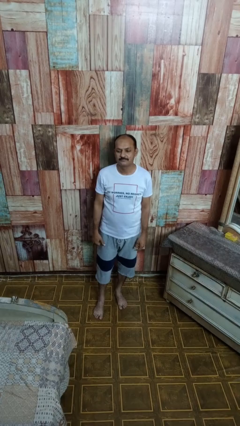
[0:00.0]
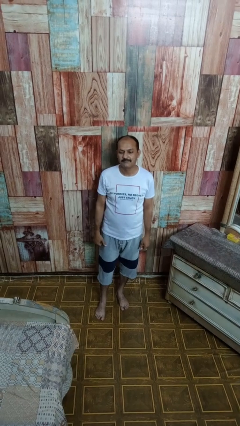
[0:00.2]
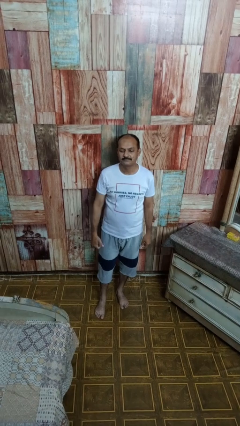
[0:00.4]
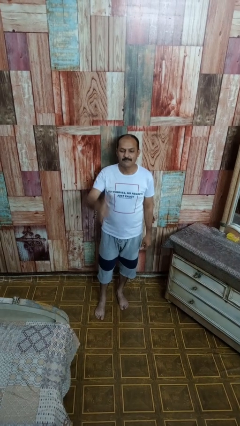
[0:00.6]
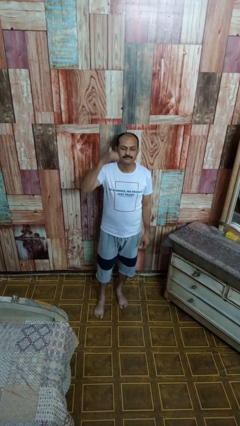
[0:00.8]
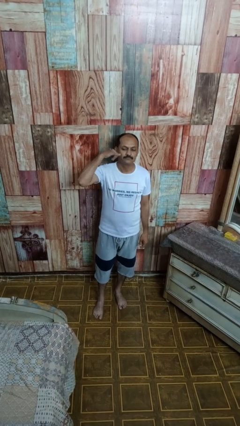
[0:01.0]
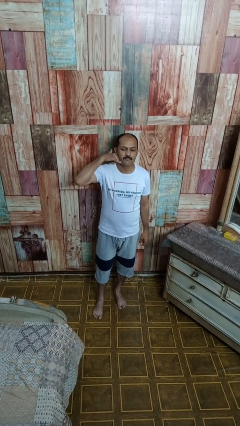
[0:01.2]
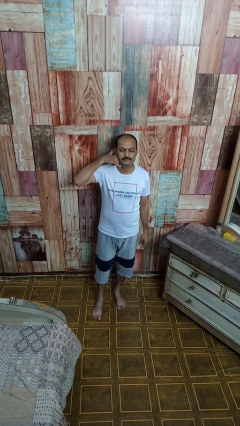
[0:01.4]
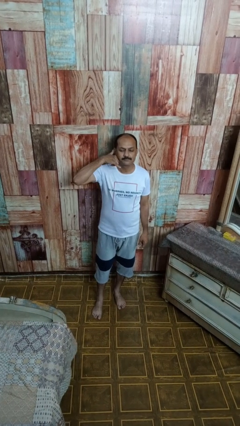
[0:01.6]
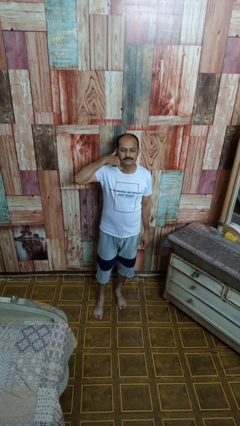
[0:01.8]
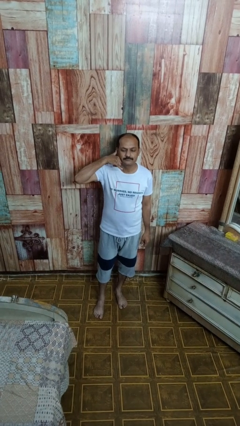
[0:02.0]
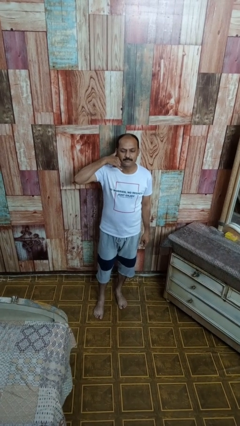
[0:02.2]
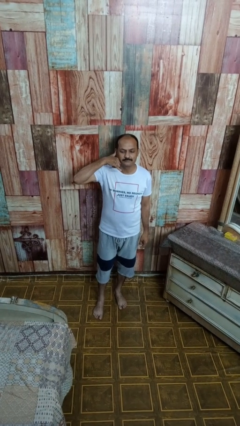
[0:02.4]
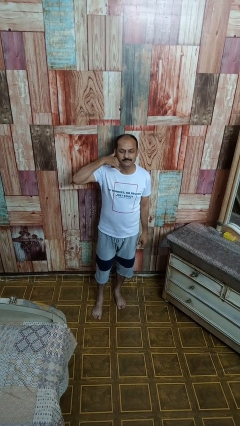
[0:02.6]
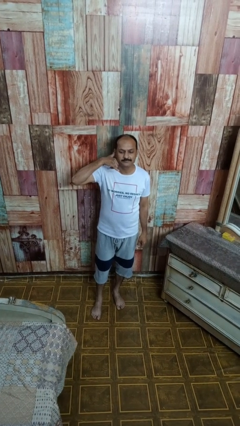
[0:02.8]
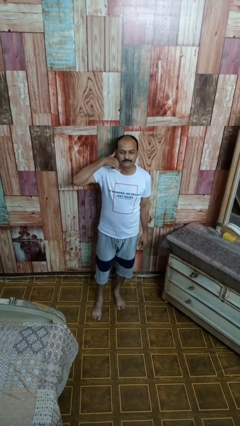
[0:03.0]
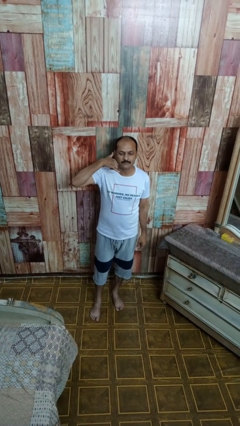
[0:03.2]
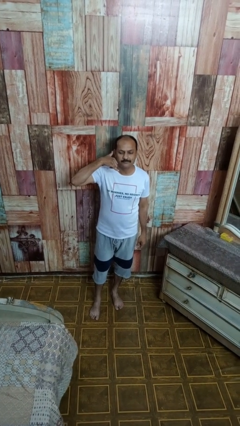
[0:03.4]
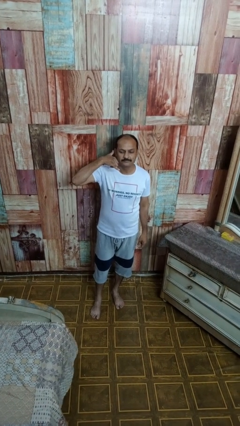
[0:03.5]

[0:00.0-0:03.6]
person gestures call me

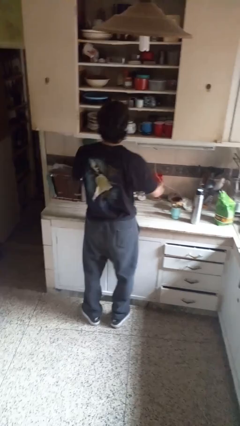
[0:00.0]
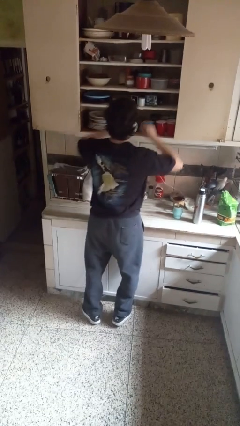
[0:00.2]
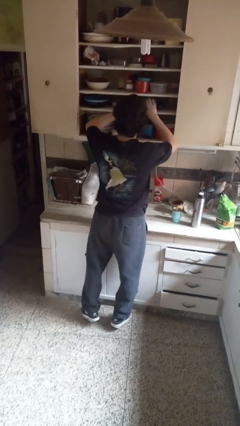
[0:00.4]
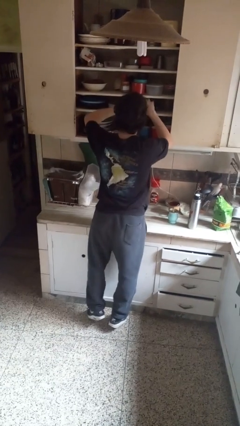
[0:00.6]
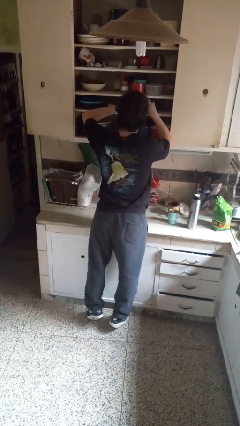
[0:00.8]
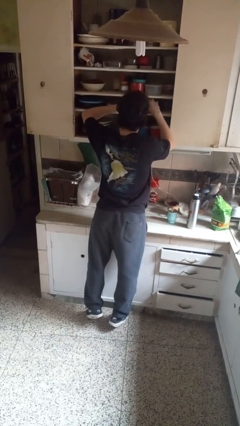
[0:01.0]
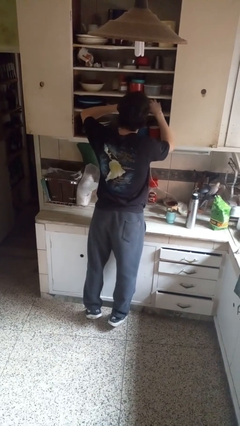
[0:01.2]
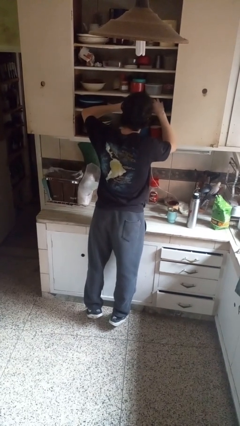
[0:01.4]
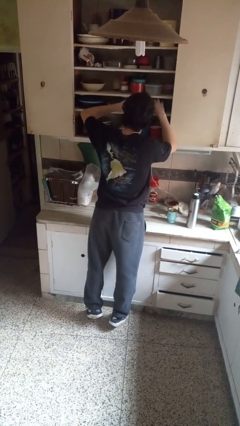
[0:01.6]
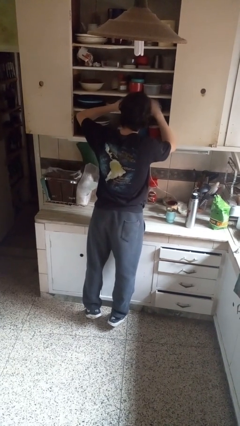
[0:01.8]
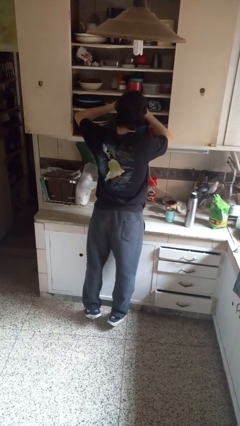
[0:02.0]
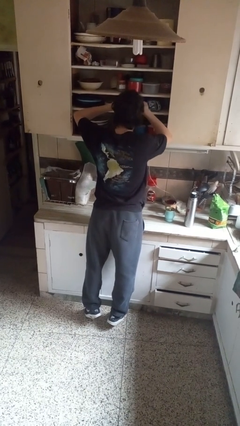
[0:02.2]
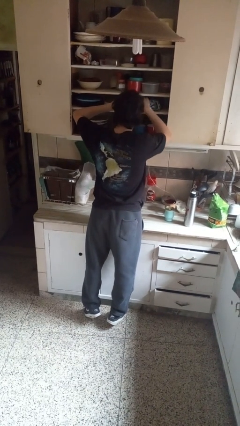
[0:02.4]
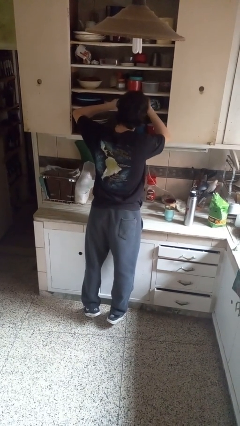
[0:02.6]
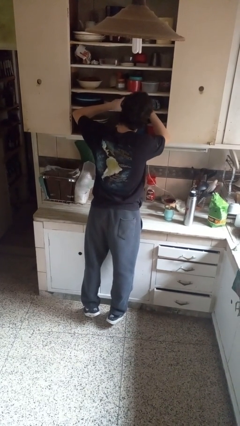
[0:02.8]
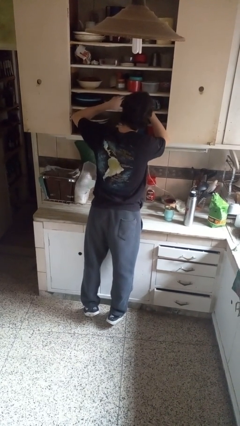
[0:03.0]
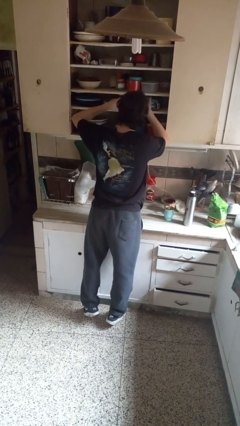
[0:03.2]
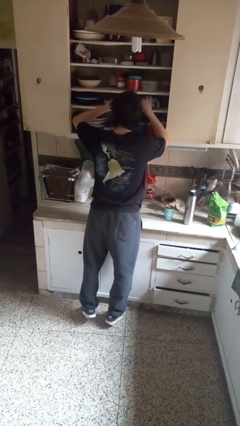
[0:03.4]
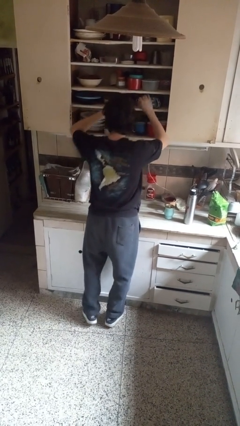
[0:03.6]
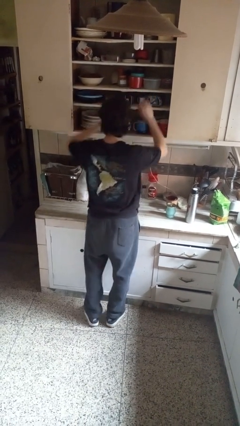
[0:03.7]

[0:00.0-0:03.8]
person searches in cabinet

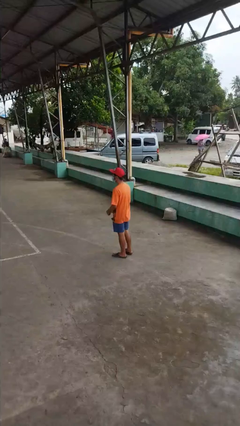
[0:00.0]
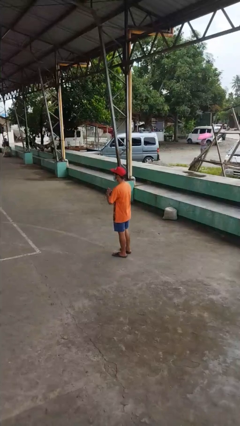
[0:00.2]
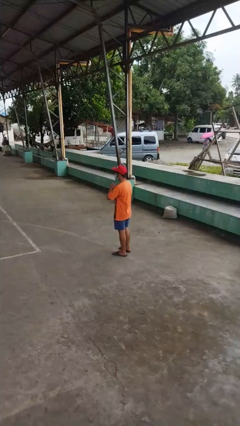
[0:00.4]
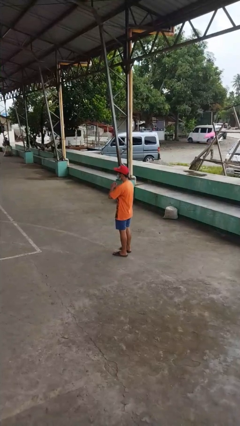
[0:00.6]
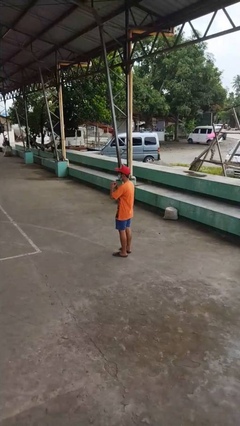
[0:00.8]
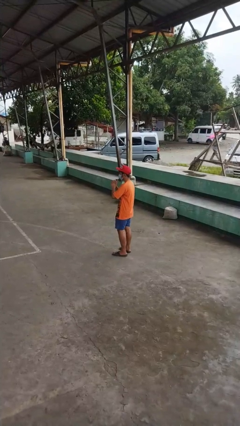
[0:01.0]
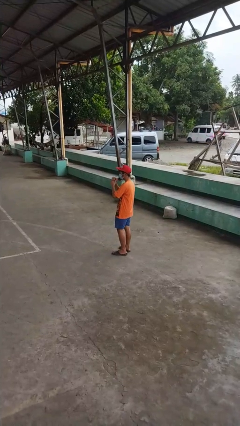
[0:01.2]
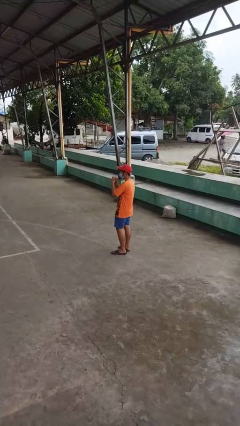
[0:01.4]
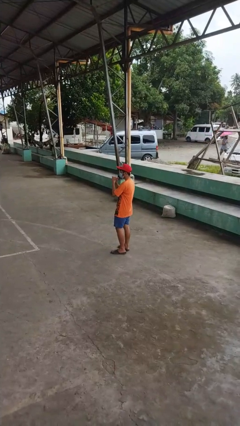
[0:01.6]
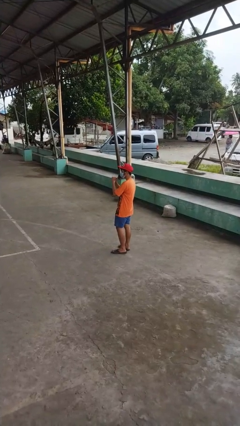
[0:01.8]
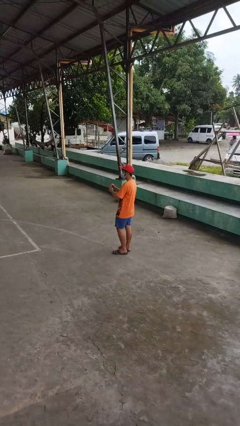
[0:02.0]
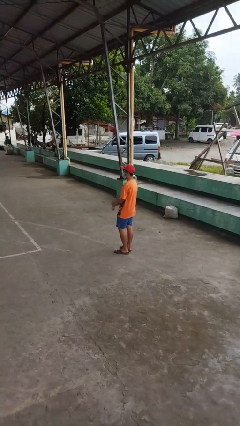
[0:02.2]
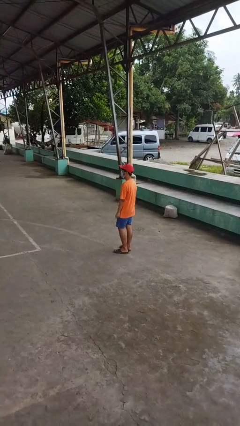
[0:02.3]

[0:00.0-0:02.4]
person cracks knuckles

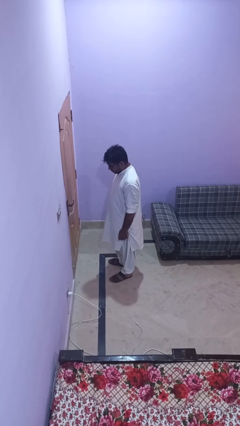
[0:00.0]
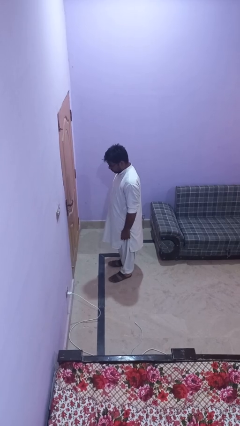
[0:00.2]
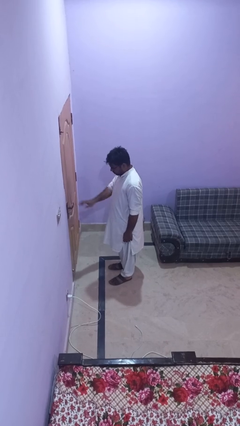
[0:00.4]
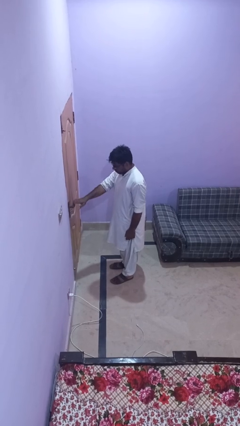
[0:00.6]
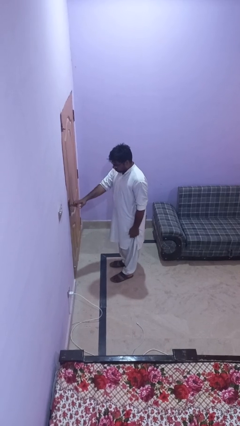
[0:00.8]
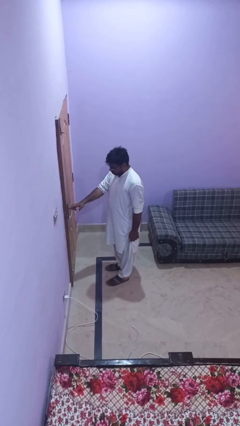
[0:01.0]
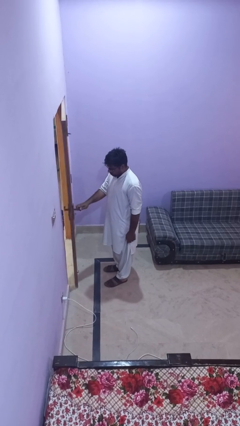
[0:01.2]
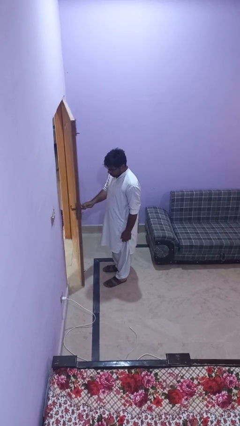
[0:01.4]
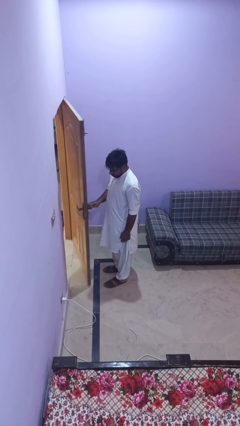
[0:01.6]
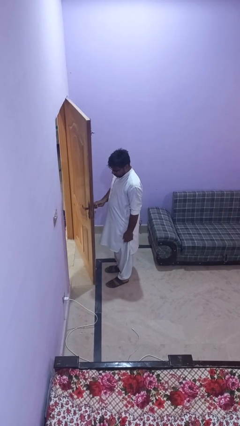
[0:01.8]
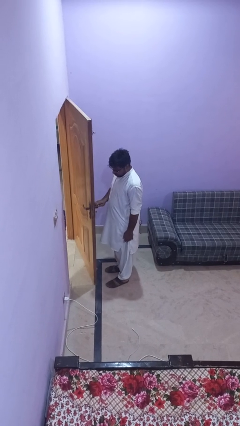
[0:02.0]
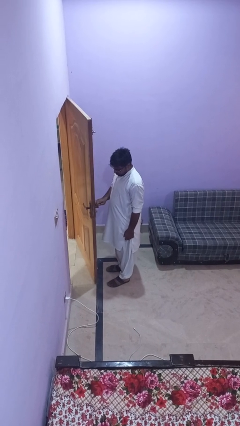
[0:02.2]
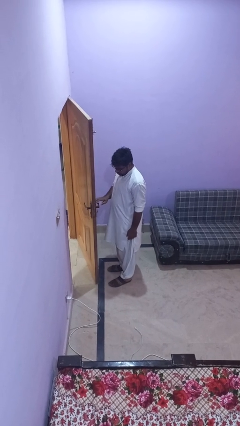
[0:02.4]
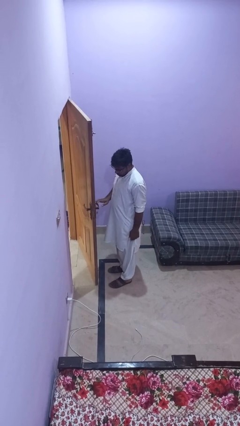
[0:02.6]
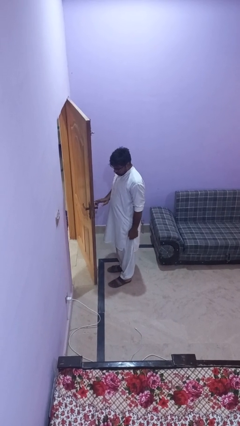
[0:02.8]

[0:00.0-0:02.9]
person opens facility door

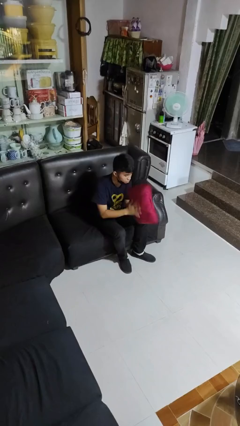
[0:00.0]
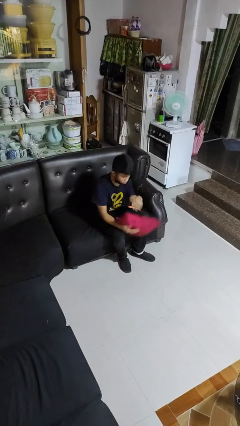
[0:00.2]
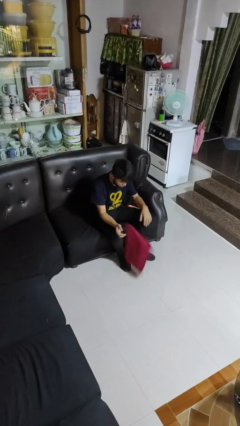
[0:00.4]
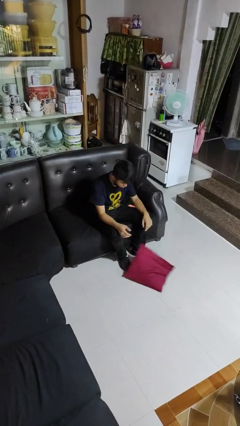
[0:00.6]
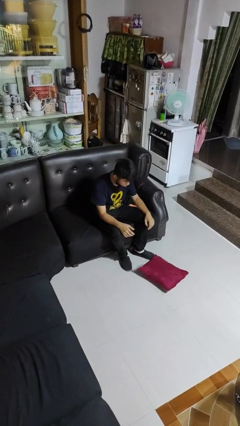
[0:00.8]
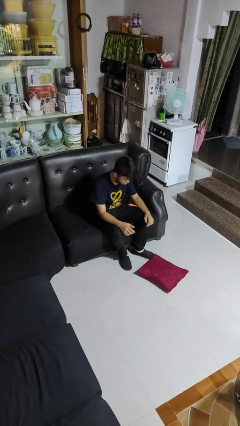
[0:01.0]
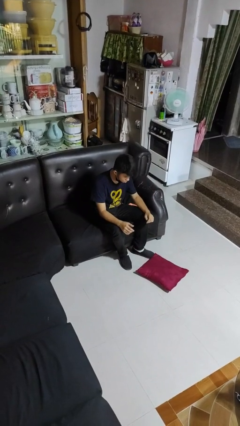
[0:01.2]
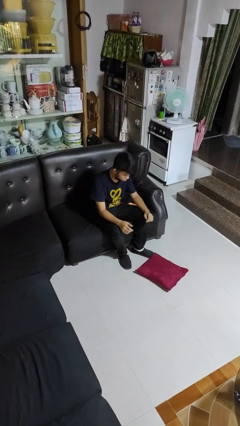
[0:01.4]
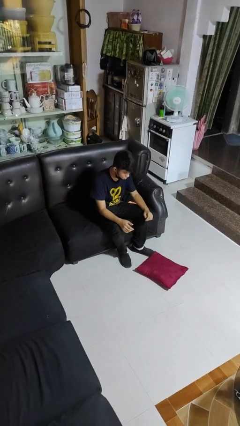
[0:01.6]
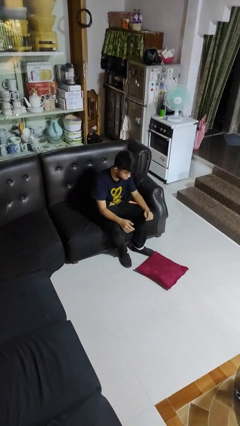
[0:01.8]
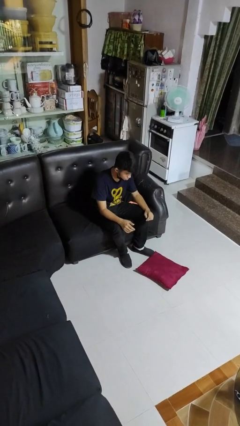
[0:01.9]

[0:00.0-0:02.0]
person drops object

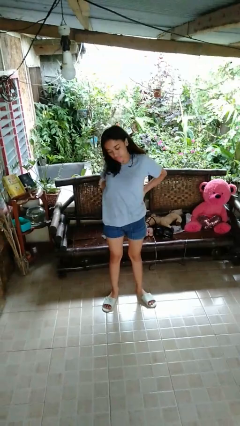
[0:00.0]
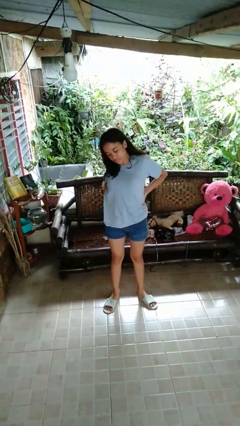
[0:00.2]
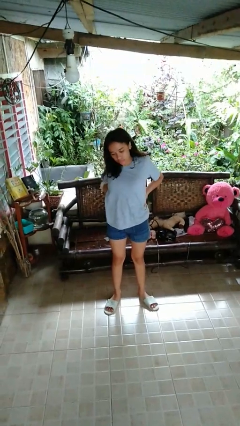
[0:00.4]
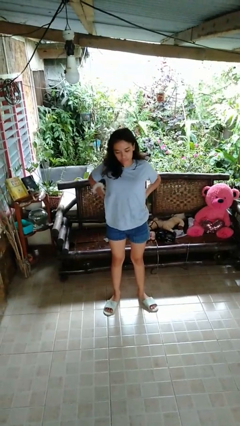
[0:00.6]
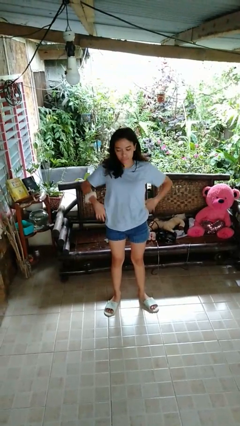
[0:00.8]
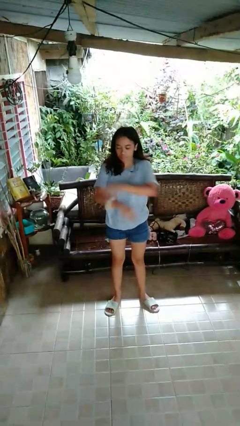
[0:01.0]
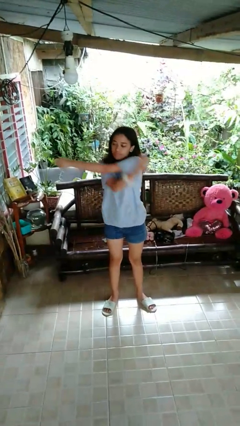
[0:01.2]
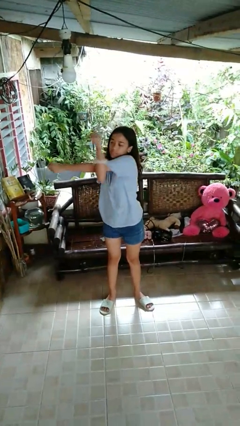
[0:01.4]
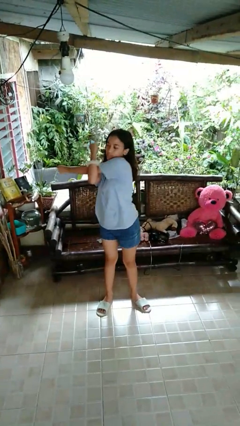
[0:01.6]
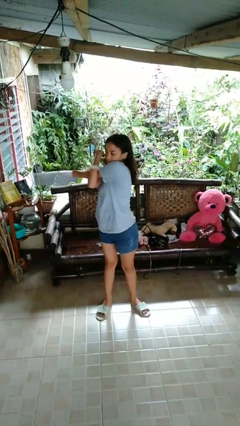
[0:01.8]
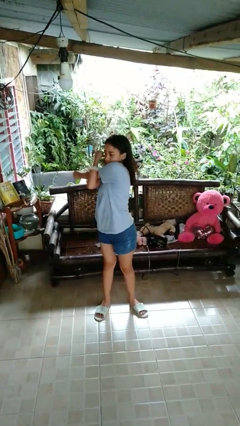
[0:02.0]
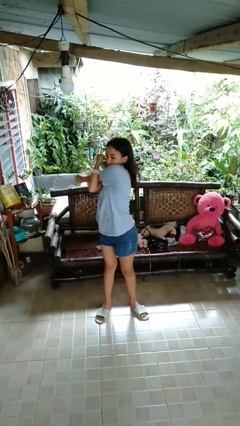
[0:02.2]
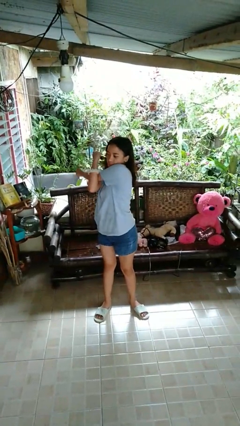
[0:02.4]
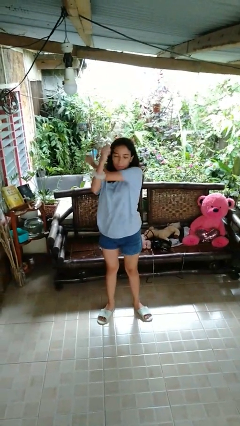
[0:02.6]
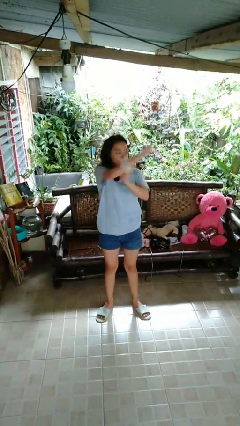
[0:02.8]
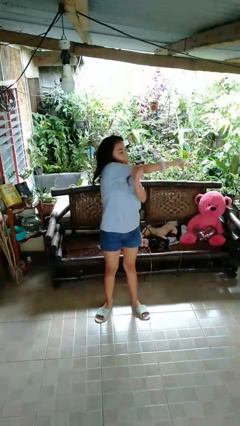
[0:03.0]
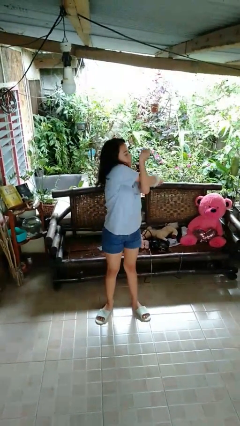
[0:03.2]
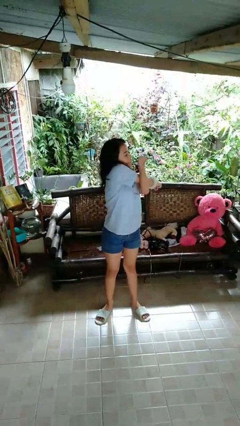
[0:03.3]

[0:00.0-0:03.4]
person stretches arms to side
